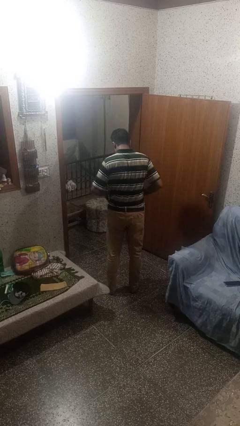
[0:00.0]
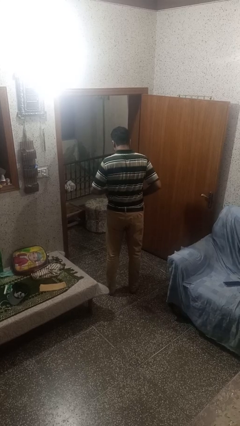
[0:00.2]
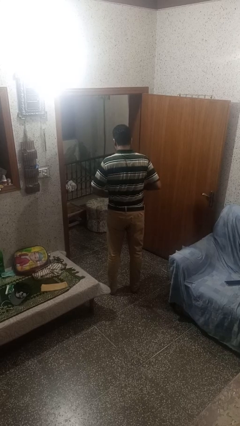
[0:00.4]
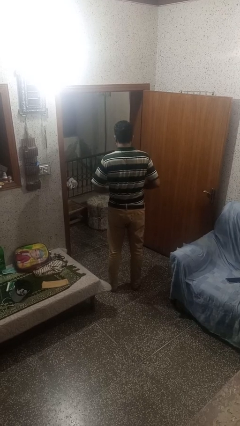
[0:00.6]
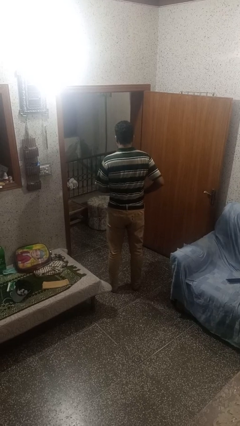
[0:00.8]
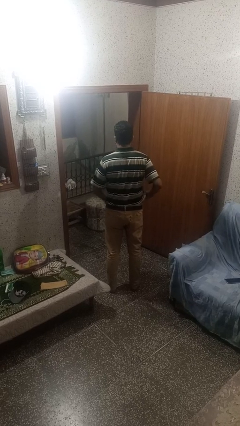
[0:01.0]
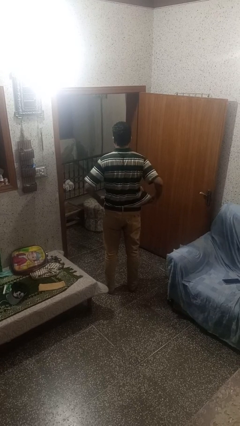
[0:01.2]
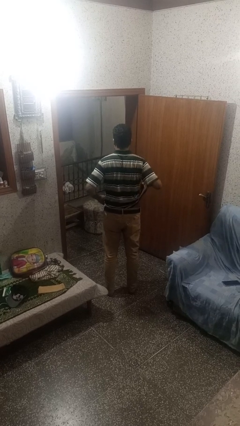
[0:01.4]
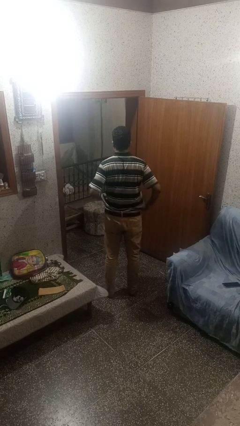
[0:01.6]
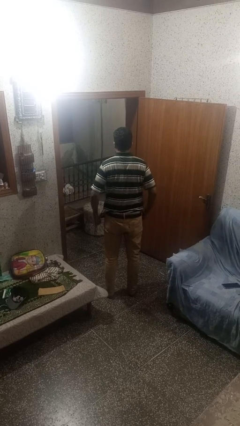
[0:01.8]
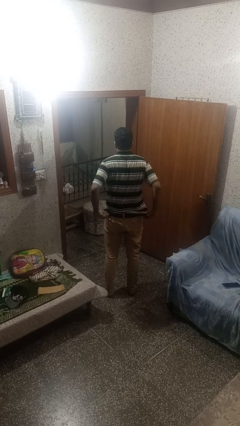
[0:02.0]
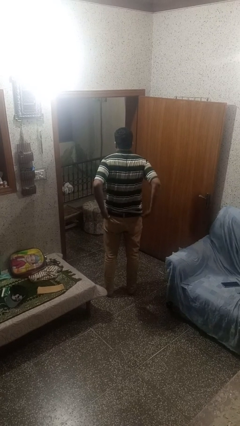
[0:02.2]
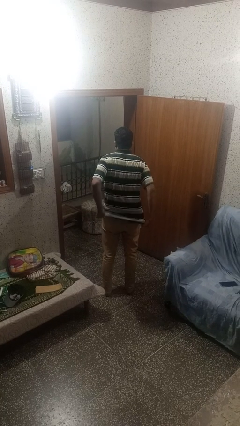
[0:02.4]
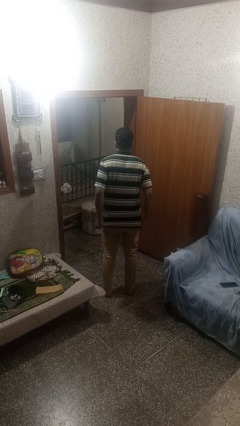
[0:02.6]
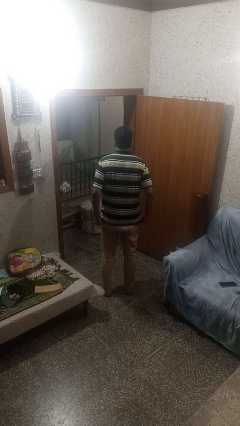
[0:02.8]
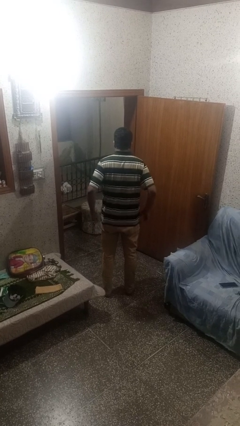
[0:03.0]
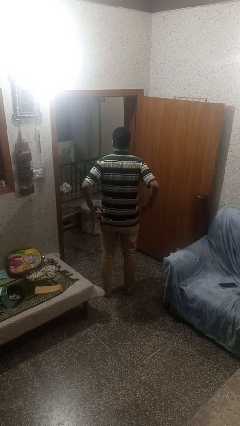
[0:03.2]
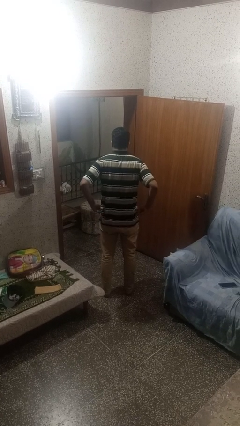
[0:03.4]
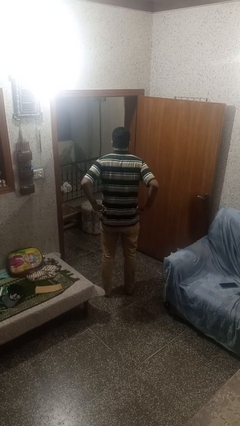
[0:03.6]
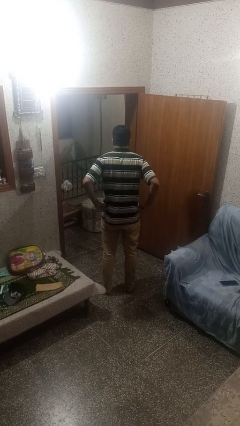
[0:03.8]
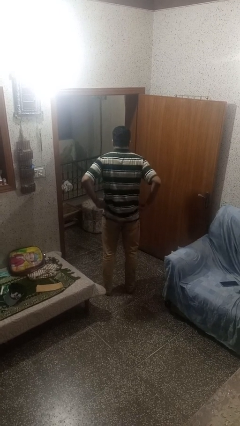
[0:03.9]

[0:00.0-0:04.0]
person untucks shirt

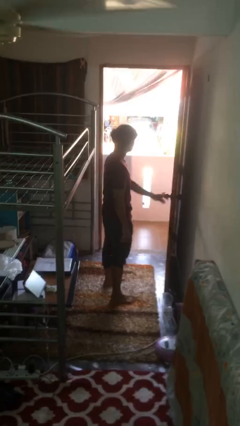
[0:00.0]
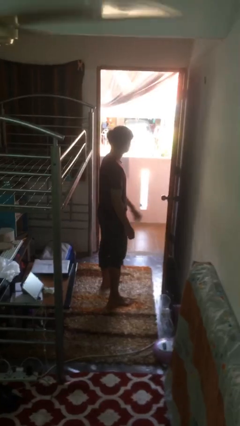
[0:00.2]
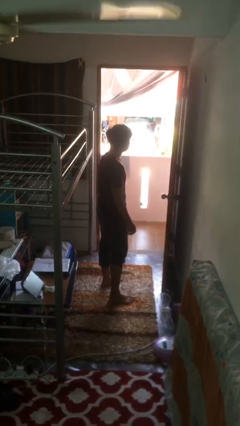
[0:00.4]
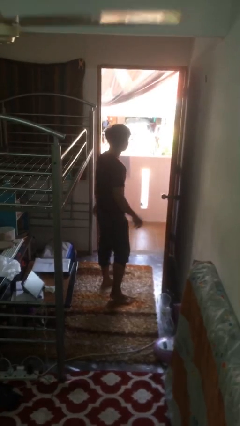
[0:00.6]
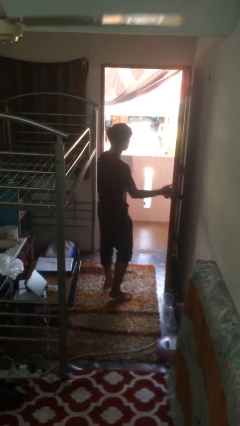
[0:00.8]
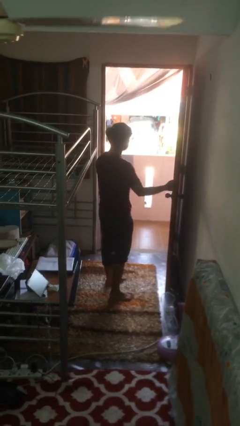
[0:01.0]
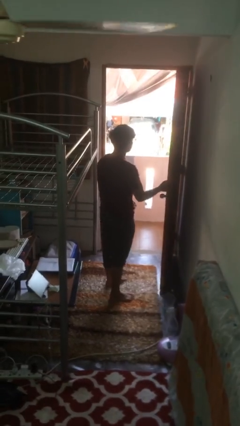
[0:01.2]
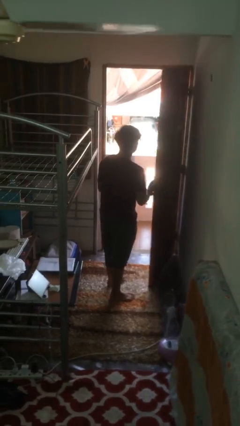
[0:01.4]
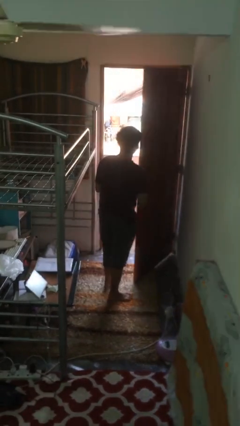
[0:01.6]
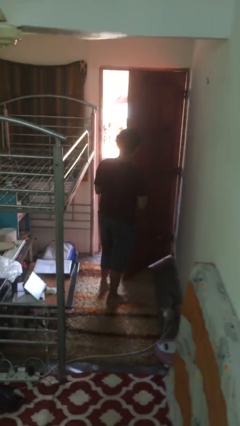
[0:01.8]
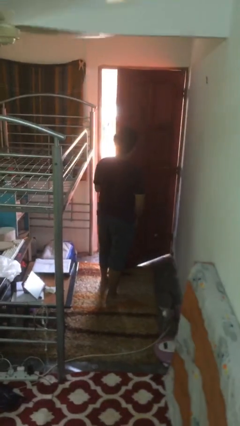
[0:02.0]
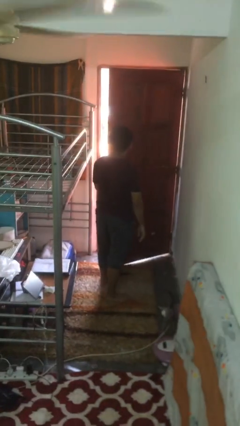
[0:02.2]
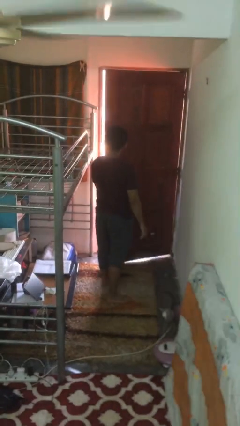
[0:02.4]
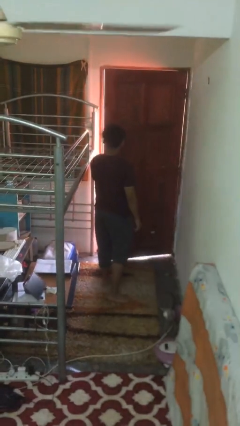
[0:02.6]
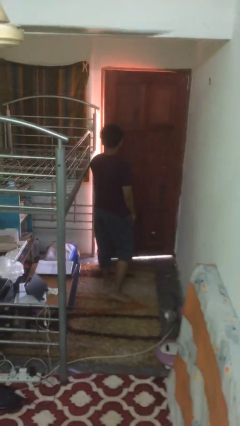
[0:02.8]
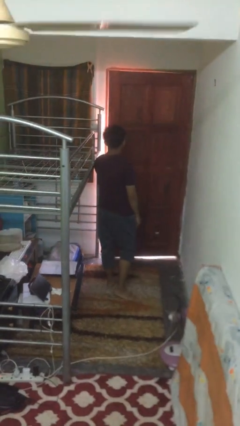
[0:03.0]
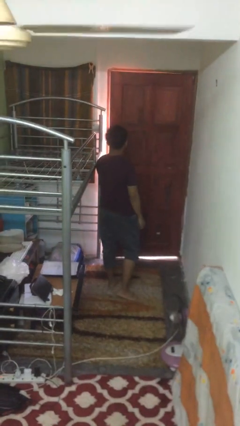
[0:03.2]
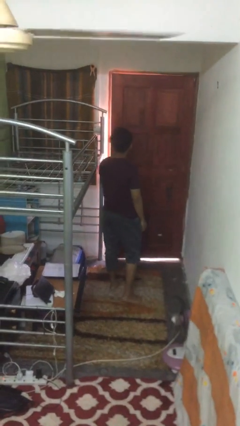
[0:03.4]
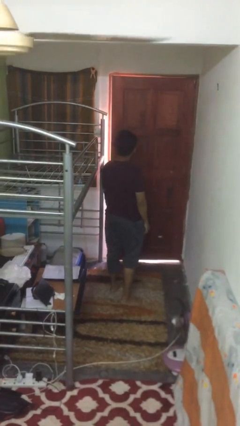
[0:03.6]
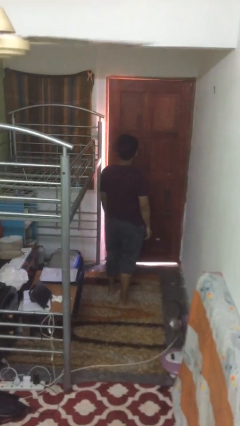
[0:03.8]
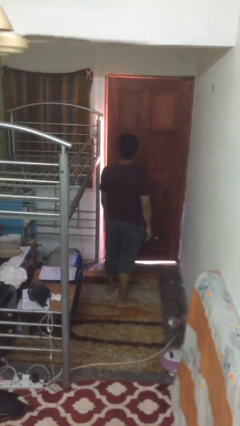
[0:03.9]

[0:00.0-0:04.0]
person closes facility door

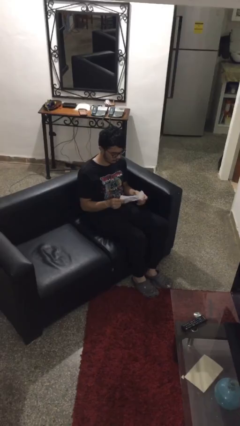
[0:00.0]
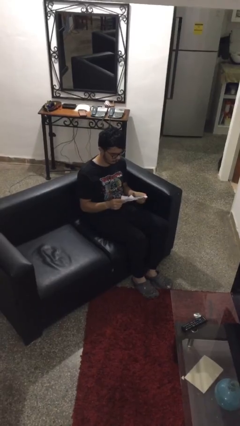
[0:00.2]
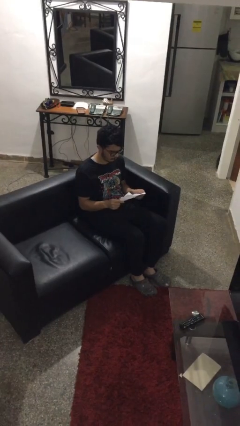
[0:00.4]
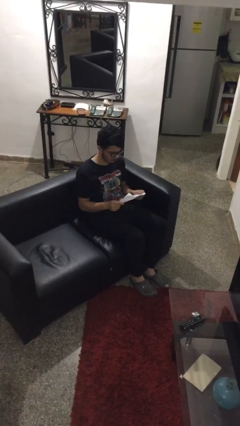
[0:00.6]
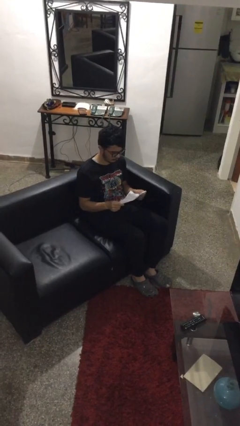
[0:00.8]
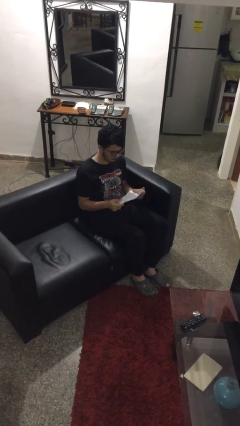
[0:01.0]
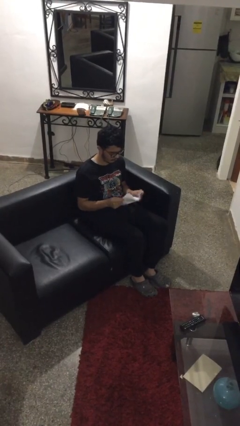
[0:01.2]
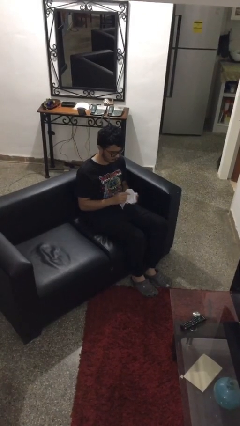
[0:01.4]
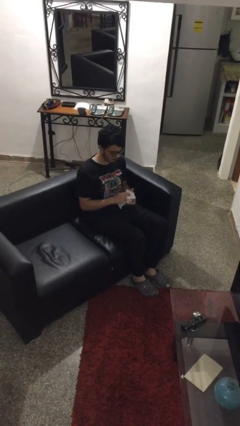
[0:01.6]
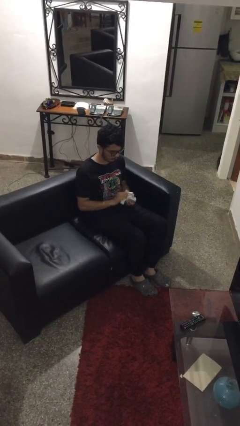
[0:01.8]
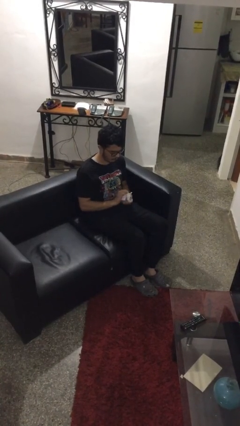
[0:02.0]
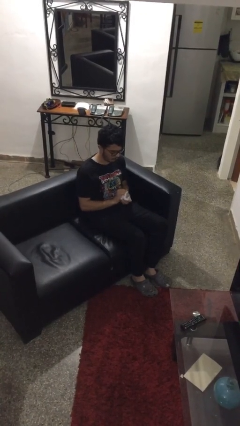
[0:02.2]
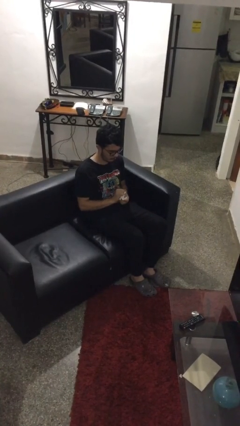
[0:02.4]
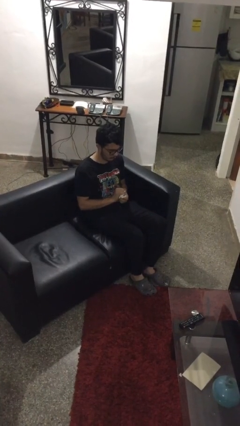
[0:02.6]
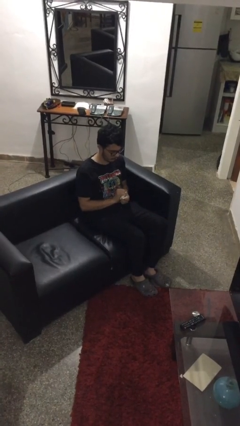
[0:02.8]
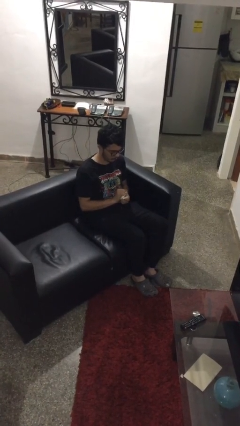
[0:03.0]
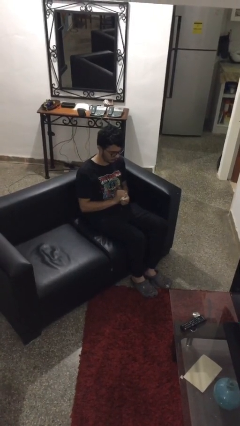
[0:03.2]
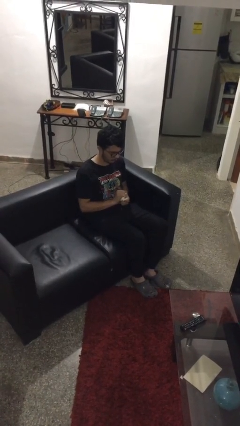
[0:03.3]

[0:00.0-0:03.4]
person crumples paper

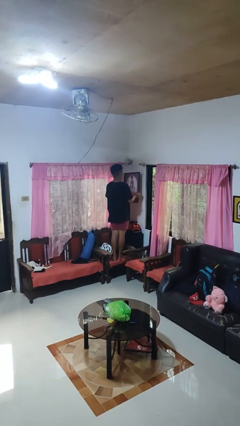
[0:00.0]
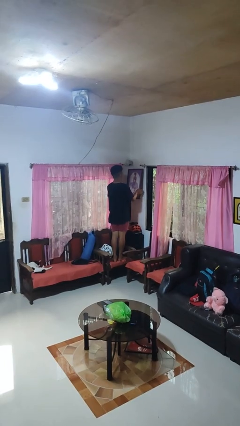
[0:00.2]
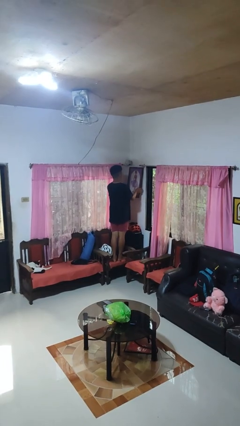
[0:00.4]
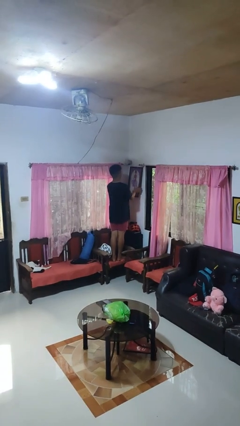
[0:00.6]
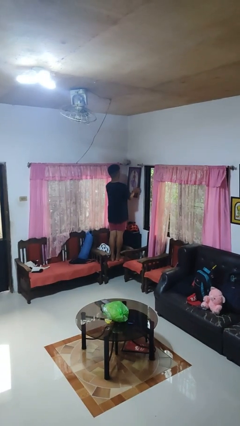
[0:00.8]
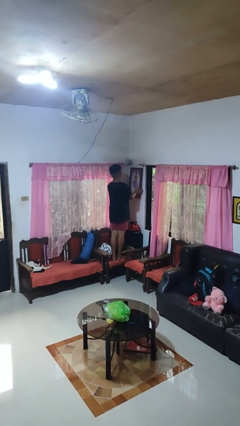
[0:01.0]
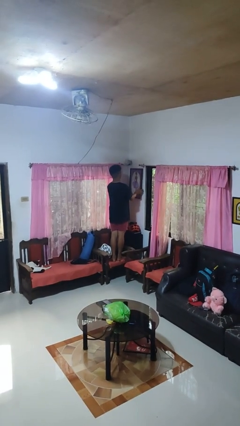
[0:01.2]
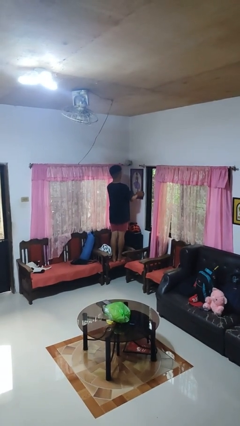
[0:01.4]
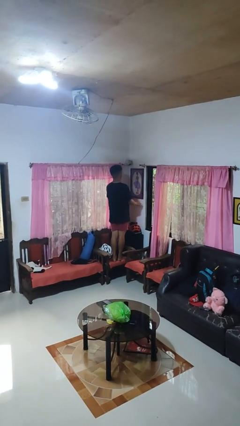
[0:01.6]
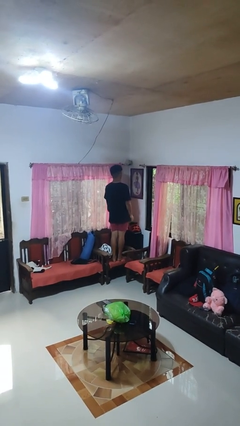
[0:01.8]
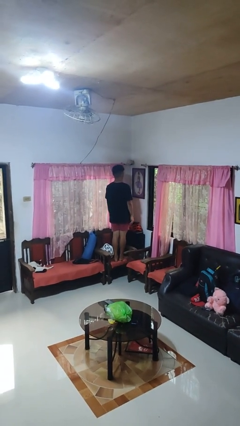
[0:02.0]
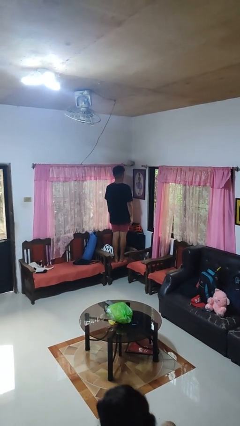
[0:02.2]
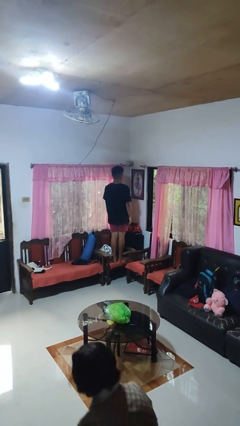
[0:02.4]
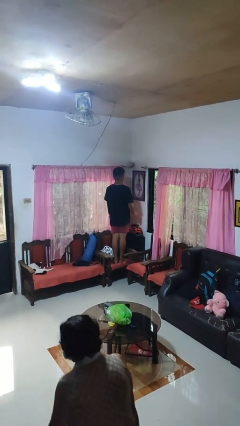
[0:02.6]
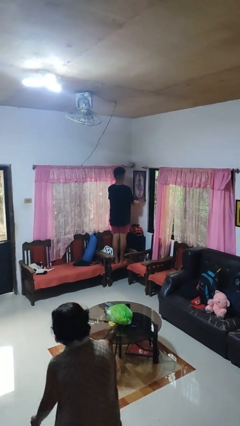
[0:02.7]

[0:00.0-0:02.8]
person puts up picture frame

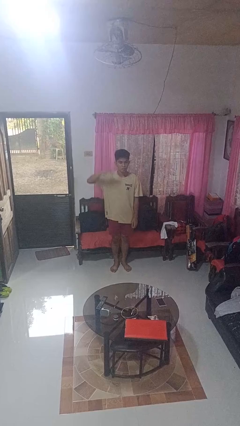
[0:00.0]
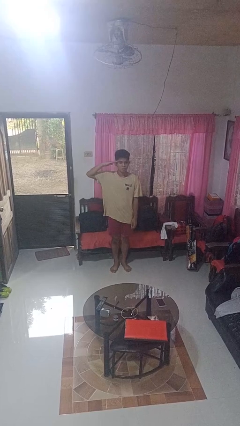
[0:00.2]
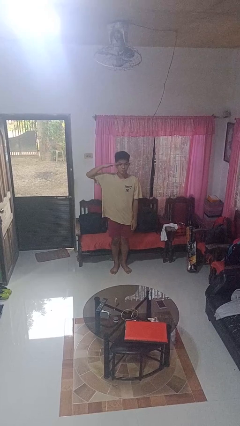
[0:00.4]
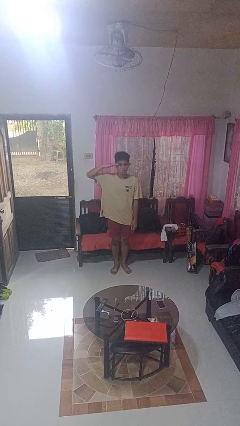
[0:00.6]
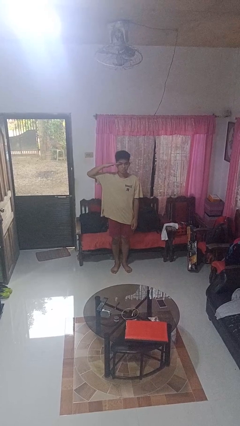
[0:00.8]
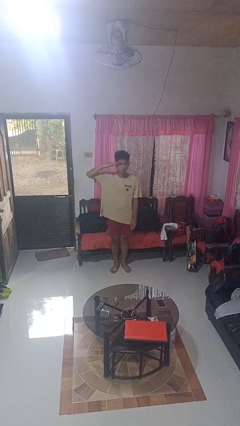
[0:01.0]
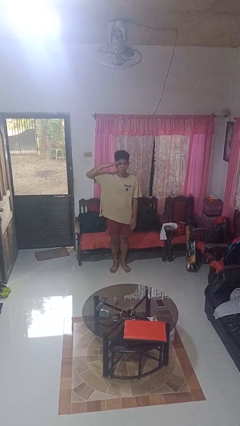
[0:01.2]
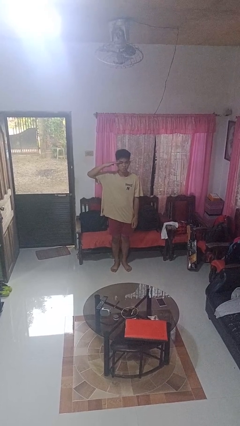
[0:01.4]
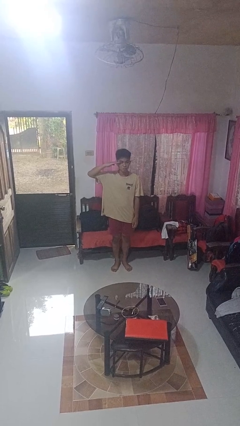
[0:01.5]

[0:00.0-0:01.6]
person salutes

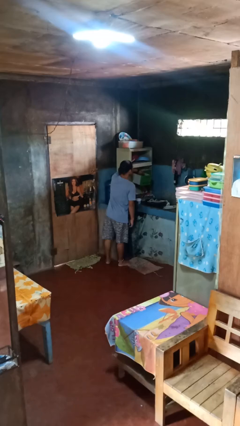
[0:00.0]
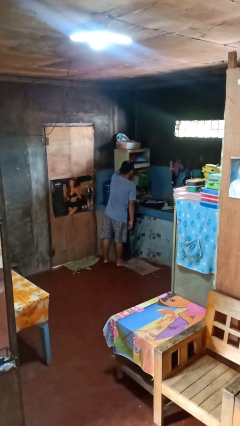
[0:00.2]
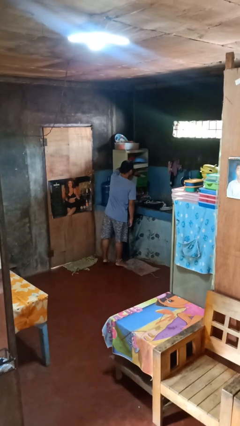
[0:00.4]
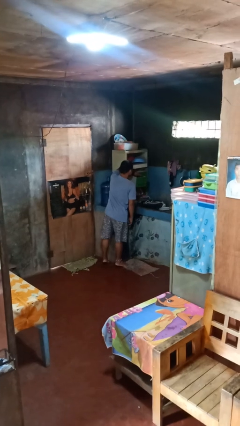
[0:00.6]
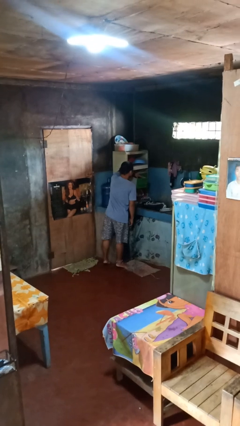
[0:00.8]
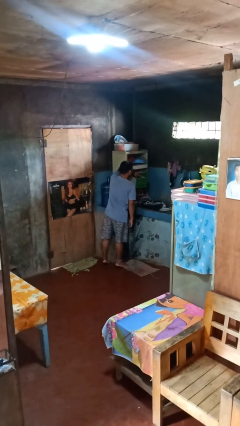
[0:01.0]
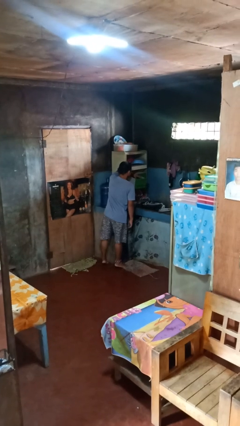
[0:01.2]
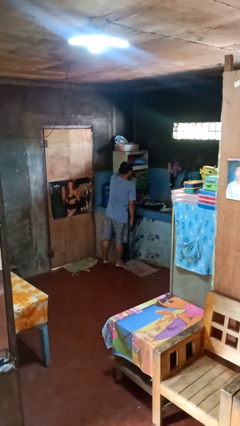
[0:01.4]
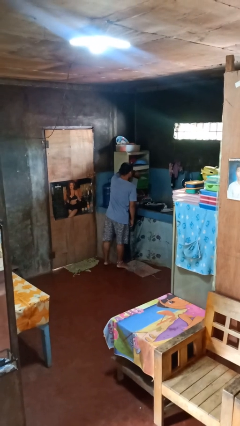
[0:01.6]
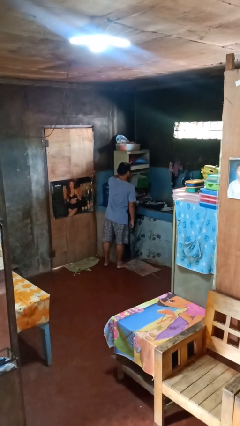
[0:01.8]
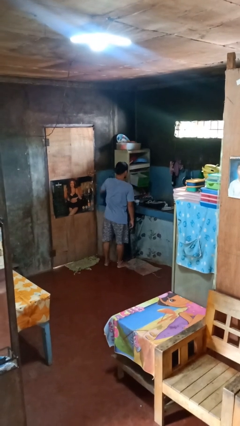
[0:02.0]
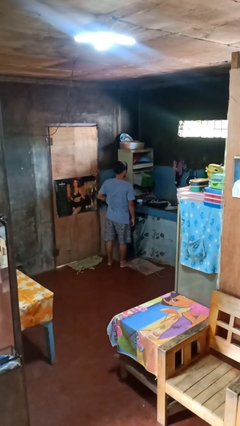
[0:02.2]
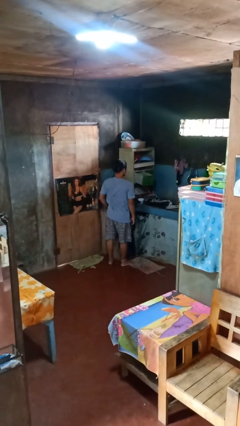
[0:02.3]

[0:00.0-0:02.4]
person searches in kitchen drawer
